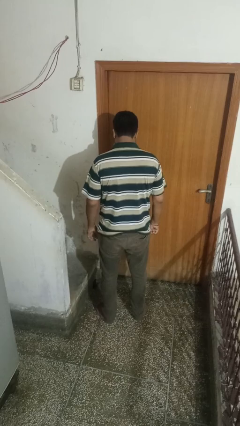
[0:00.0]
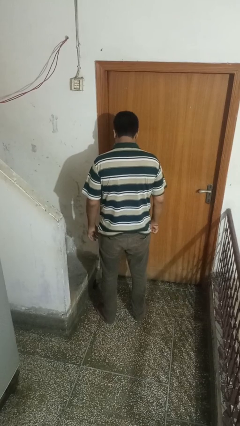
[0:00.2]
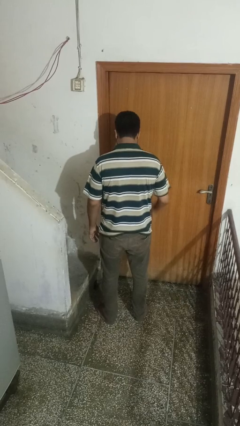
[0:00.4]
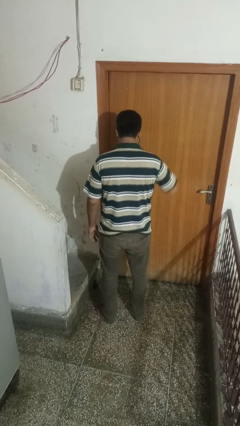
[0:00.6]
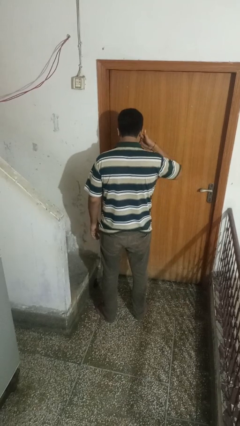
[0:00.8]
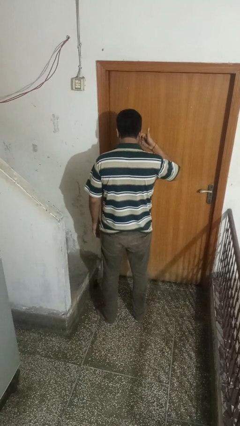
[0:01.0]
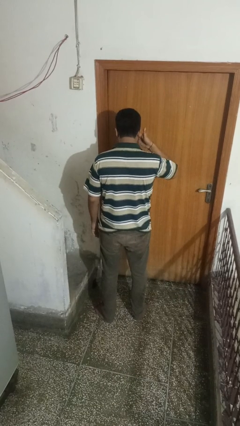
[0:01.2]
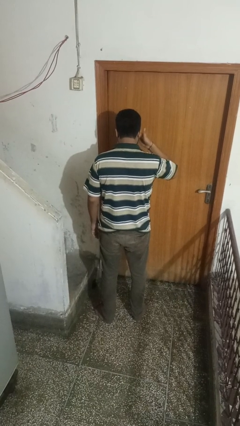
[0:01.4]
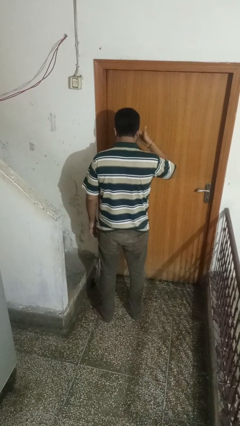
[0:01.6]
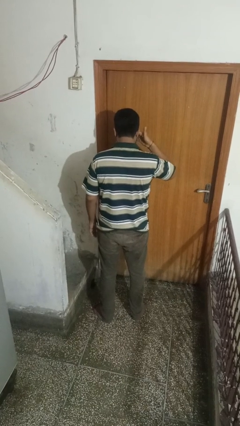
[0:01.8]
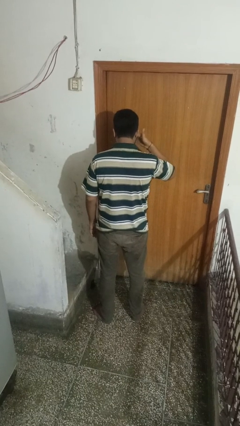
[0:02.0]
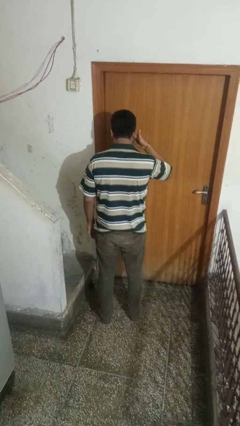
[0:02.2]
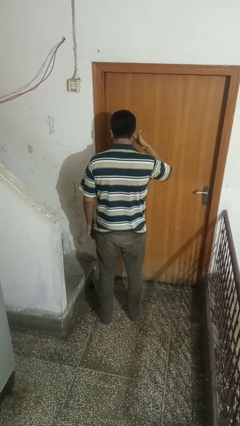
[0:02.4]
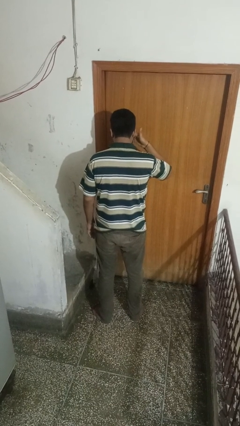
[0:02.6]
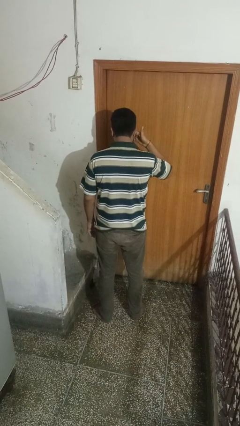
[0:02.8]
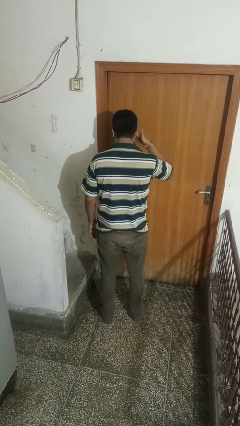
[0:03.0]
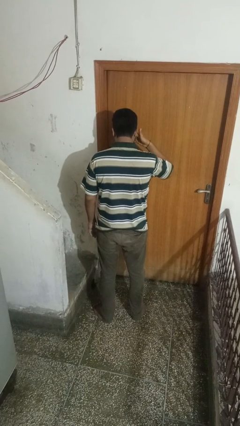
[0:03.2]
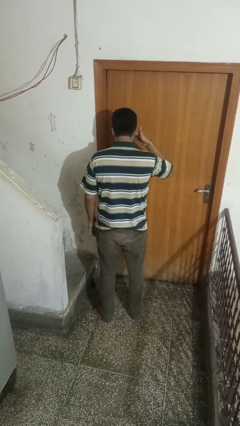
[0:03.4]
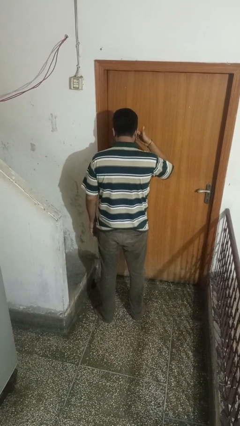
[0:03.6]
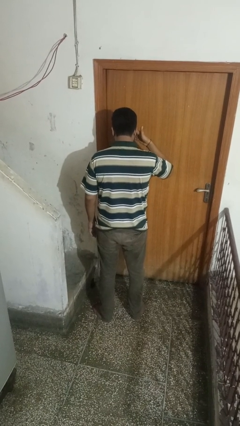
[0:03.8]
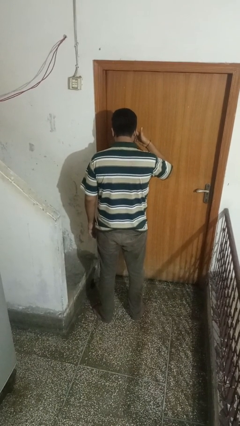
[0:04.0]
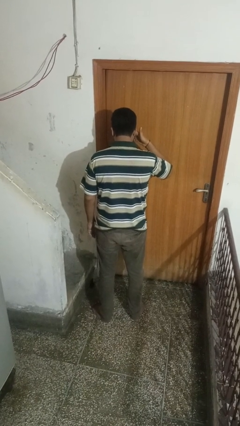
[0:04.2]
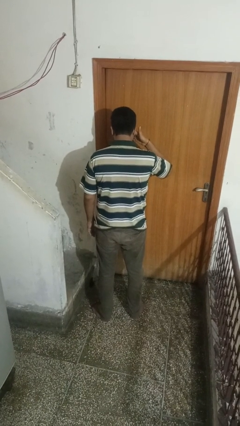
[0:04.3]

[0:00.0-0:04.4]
person rubs eyes

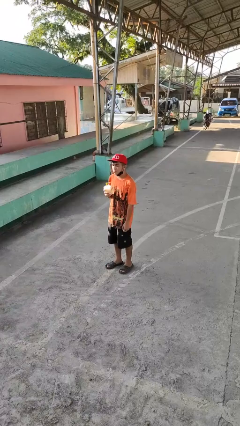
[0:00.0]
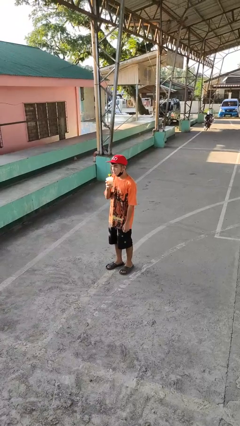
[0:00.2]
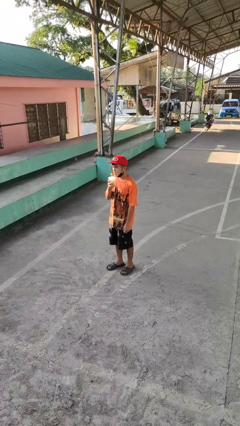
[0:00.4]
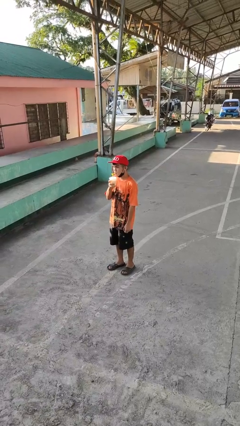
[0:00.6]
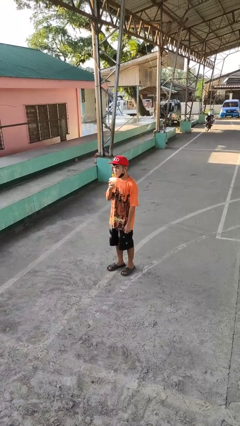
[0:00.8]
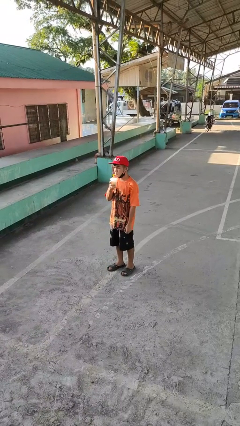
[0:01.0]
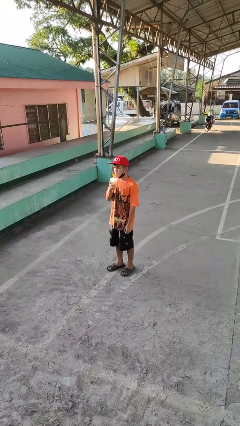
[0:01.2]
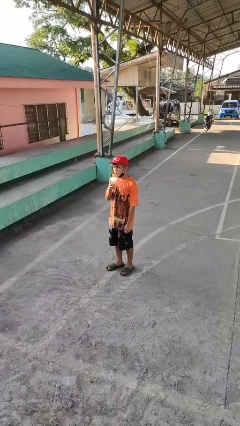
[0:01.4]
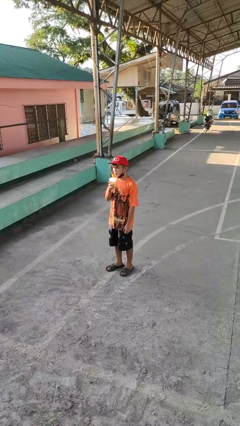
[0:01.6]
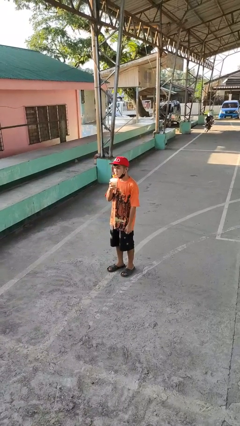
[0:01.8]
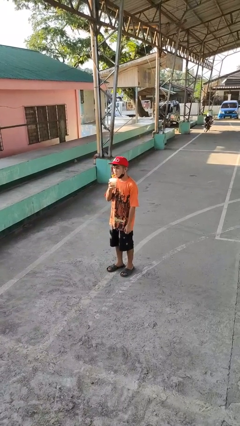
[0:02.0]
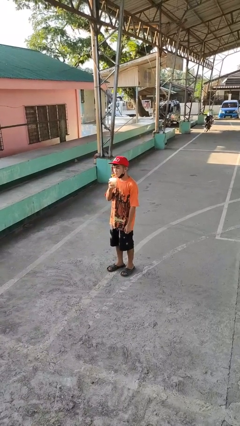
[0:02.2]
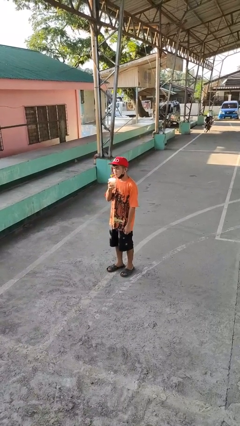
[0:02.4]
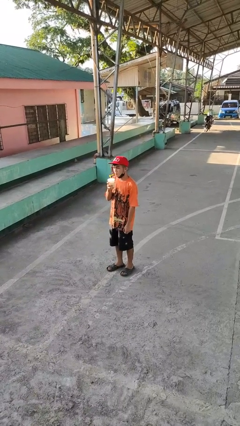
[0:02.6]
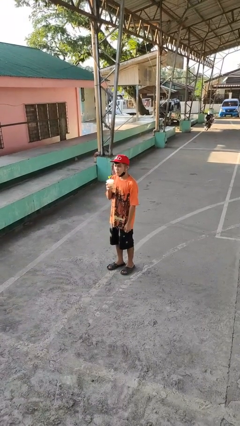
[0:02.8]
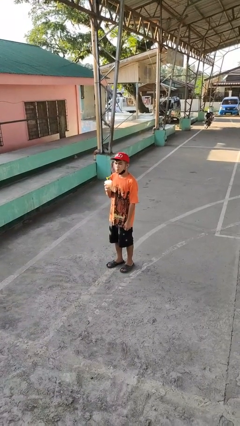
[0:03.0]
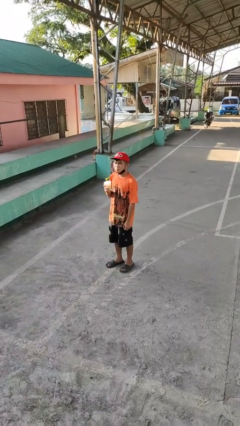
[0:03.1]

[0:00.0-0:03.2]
person drinks from straw

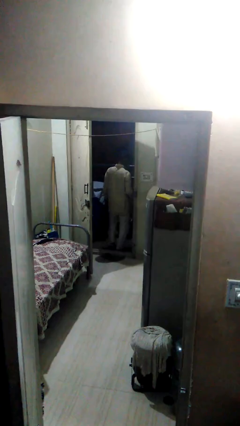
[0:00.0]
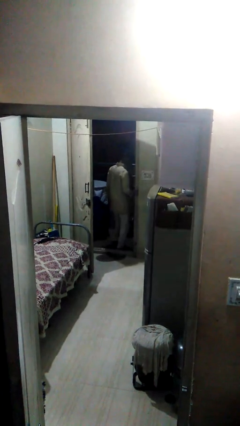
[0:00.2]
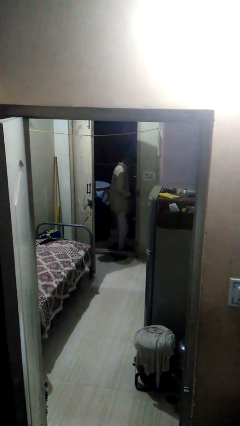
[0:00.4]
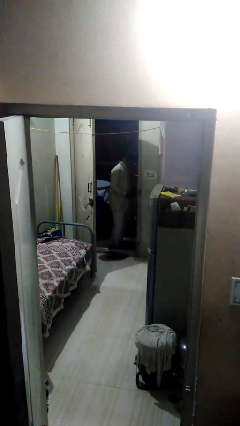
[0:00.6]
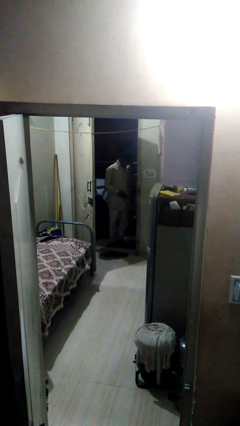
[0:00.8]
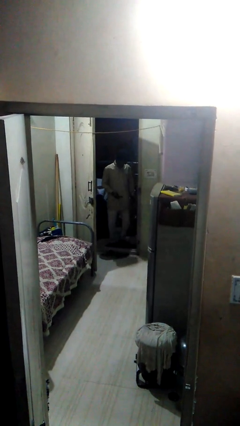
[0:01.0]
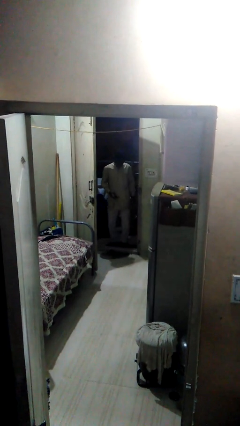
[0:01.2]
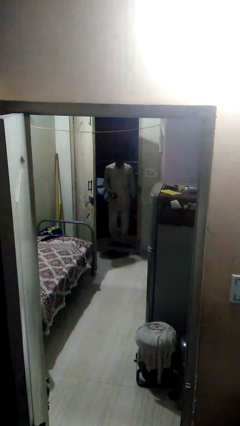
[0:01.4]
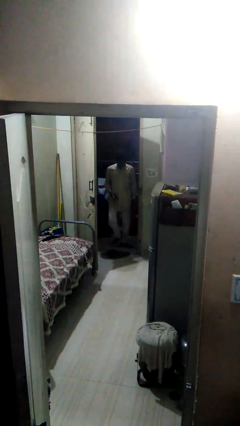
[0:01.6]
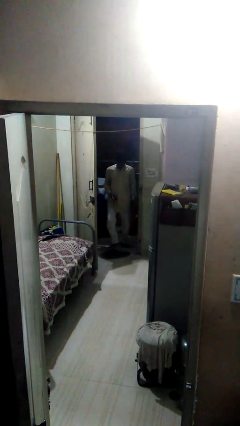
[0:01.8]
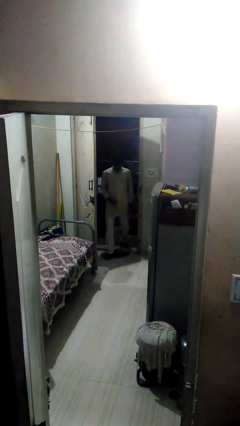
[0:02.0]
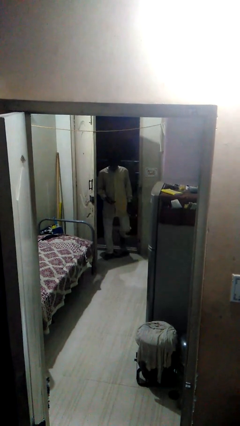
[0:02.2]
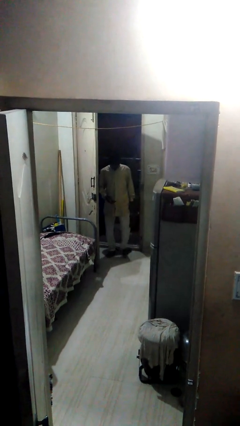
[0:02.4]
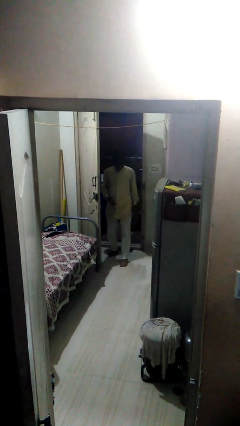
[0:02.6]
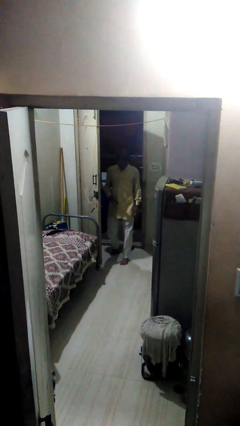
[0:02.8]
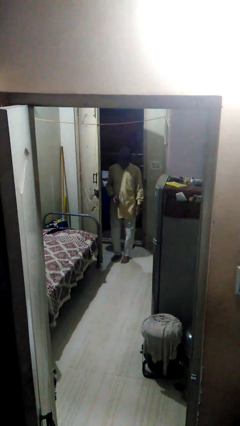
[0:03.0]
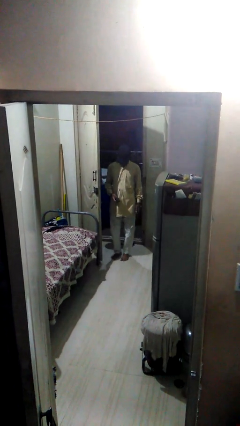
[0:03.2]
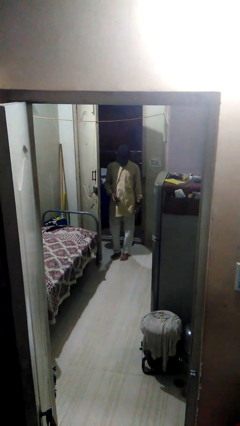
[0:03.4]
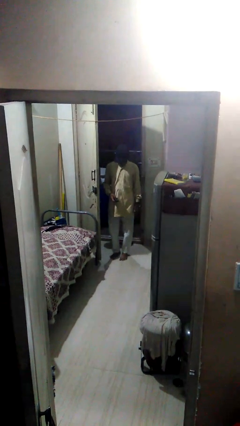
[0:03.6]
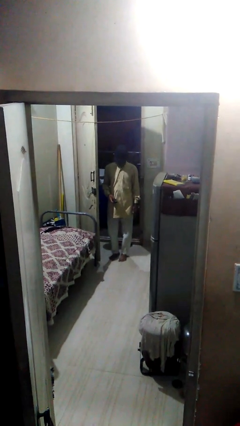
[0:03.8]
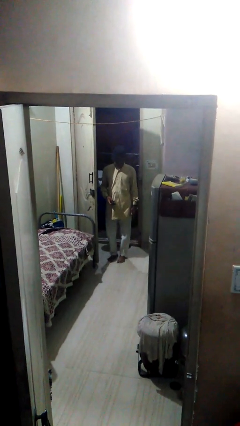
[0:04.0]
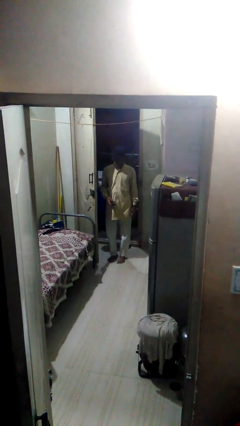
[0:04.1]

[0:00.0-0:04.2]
person enters scene through structure

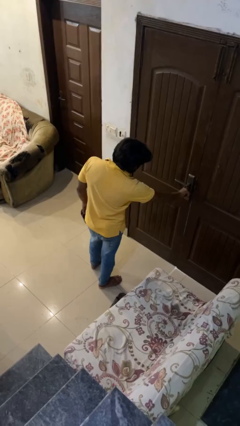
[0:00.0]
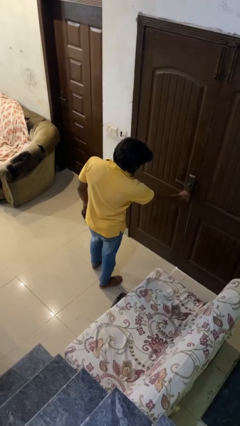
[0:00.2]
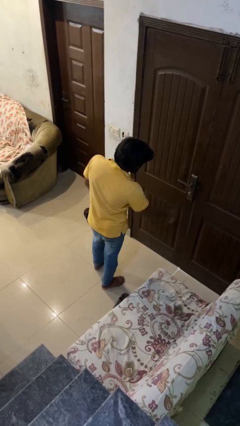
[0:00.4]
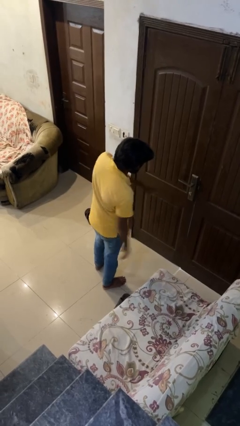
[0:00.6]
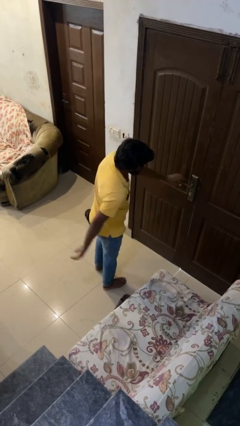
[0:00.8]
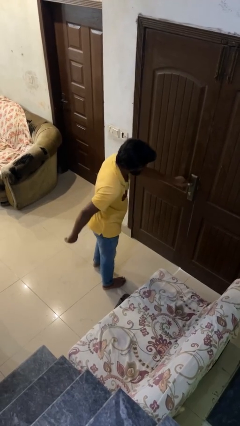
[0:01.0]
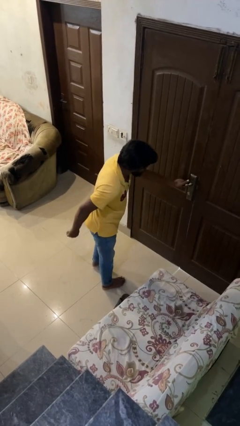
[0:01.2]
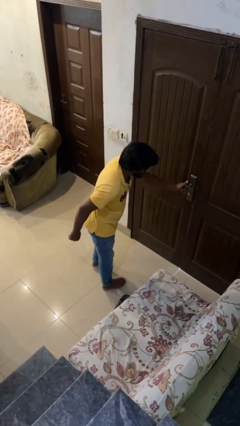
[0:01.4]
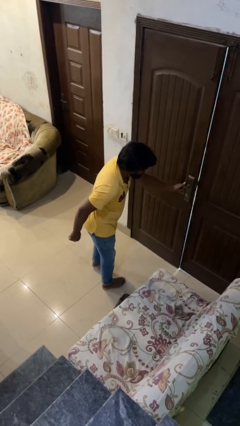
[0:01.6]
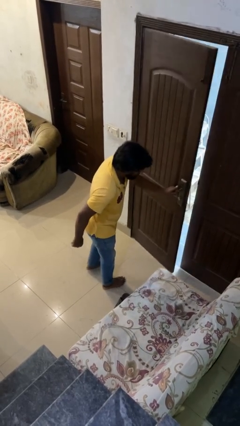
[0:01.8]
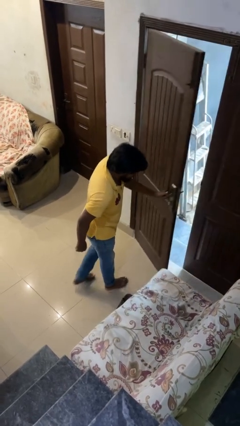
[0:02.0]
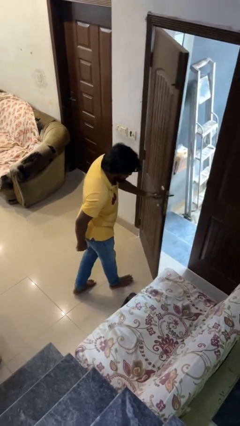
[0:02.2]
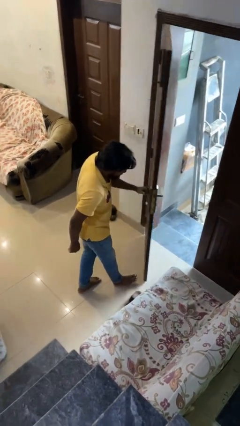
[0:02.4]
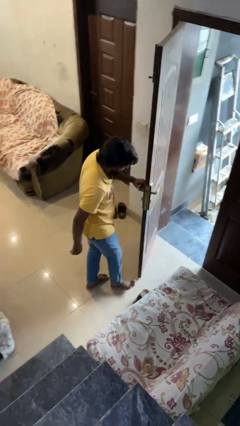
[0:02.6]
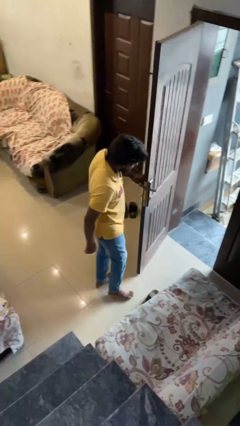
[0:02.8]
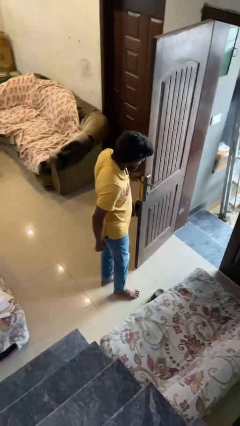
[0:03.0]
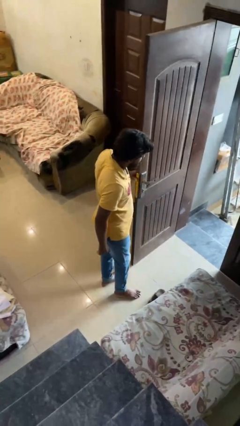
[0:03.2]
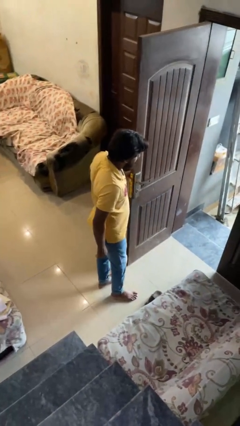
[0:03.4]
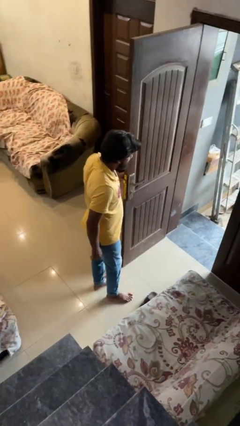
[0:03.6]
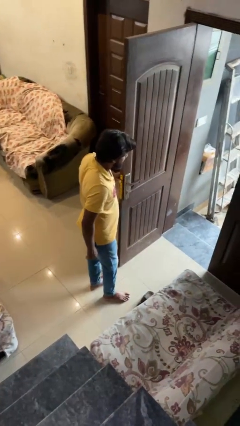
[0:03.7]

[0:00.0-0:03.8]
person opens facility door

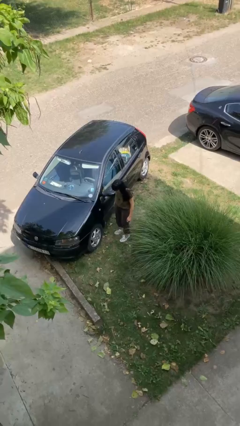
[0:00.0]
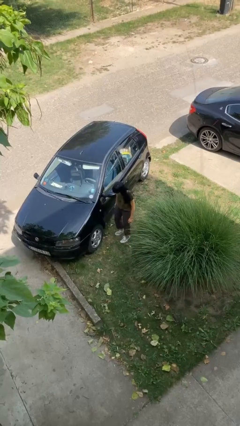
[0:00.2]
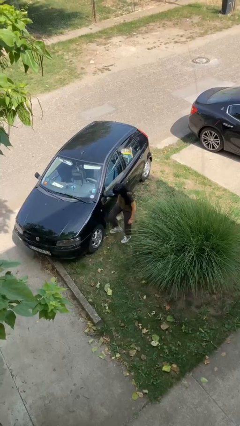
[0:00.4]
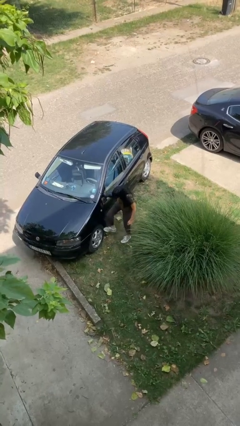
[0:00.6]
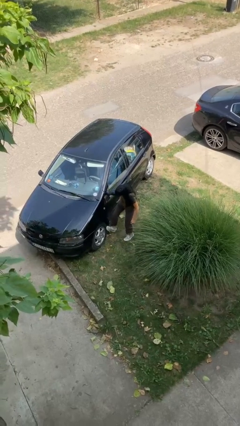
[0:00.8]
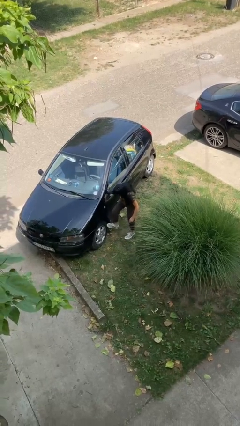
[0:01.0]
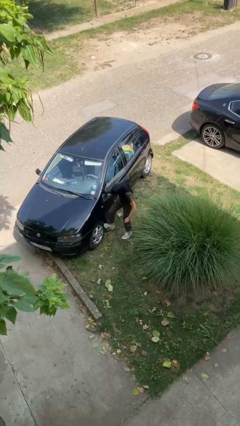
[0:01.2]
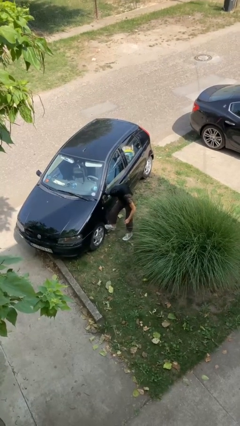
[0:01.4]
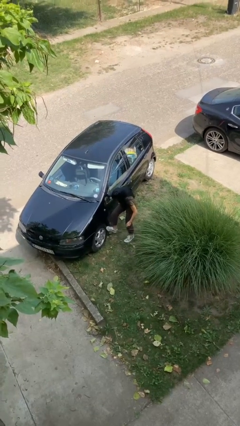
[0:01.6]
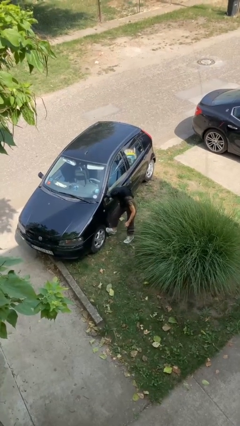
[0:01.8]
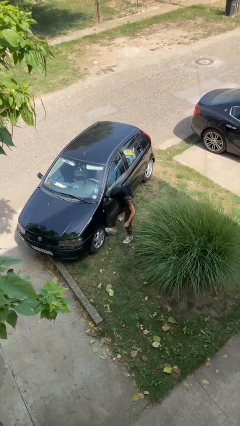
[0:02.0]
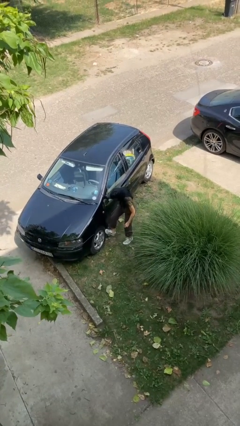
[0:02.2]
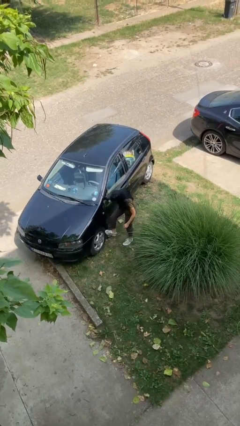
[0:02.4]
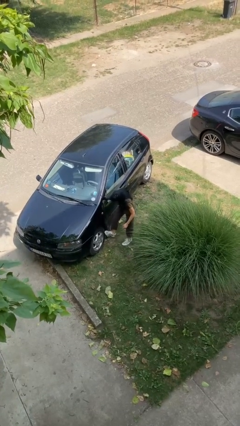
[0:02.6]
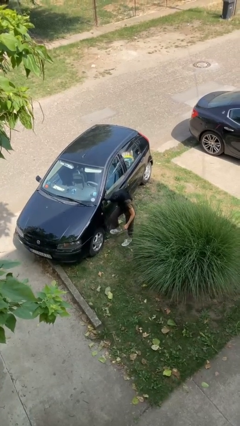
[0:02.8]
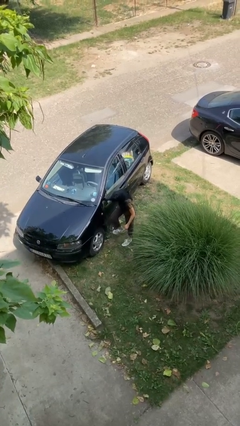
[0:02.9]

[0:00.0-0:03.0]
person kicks car tires
